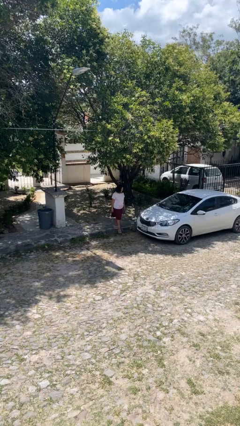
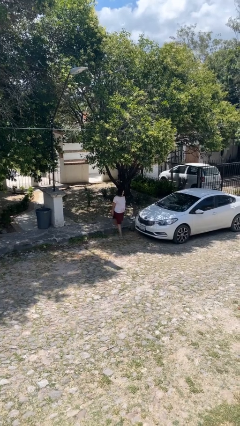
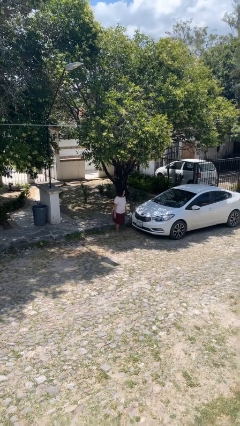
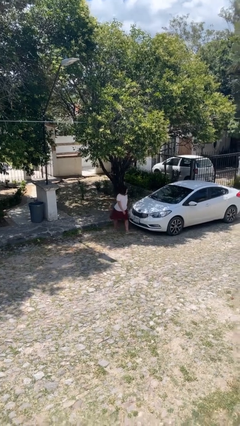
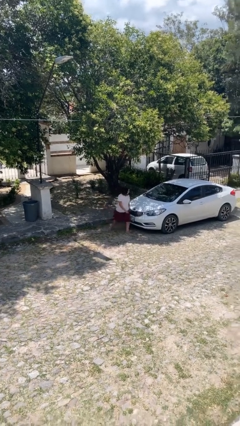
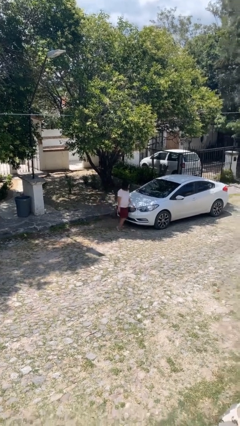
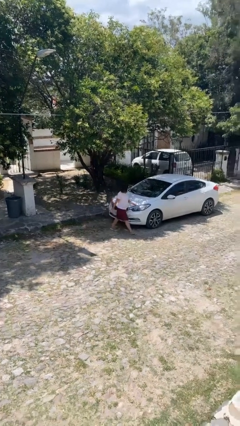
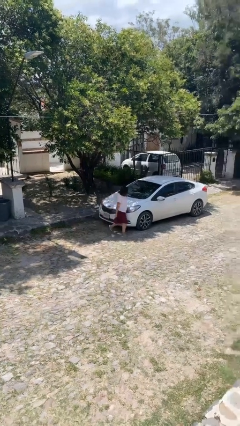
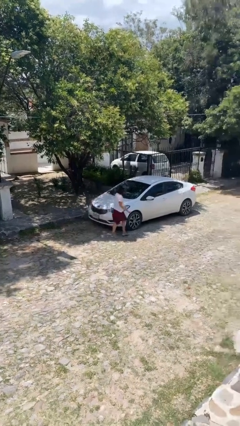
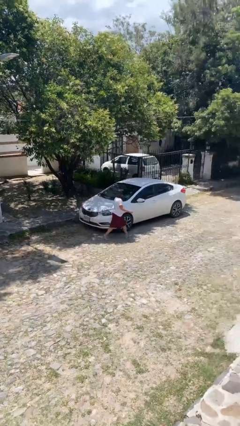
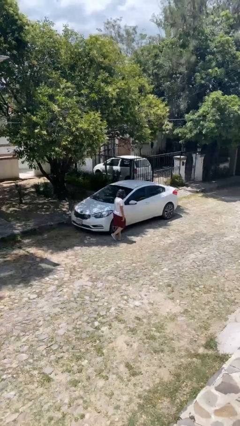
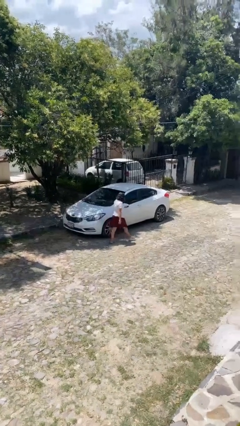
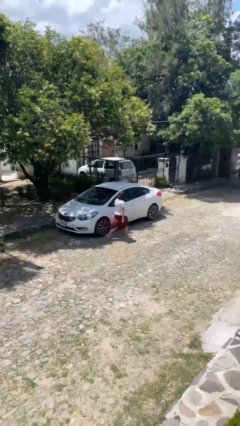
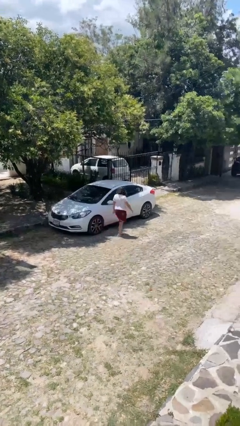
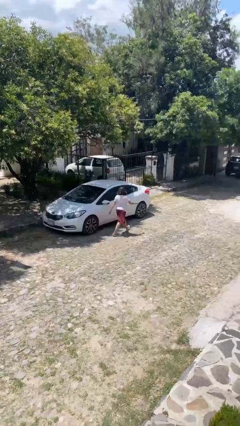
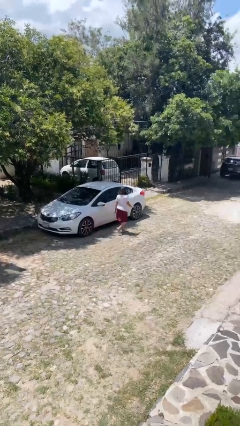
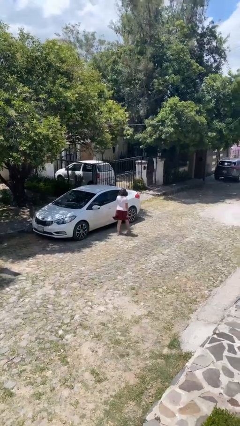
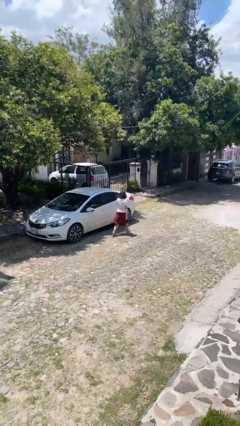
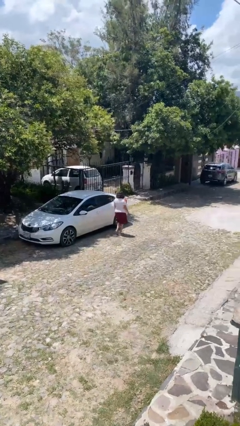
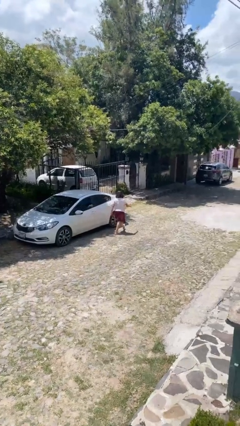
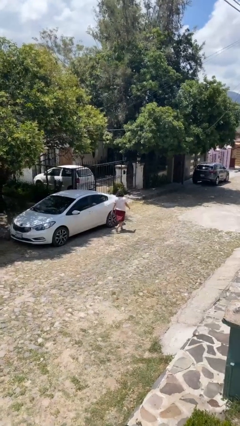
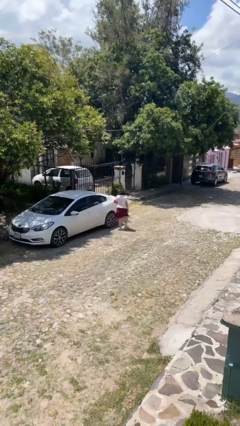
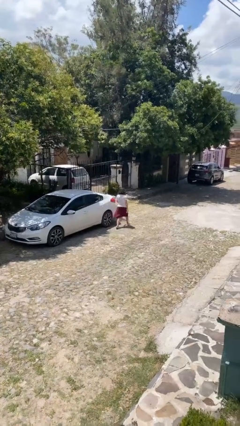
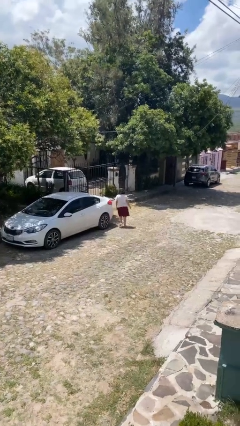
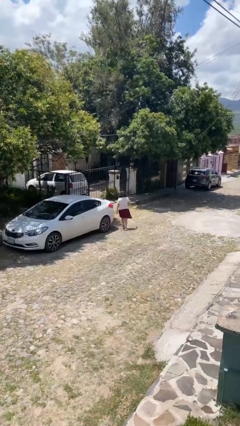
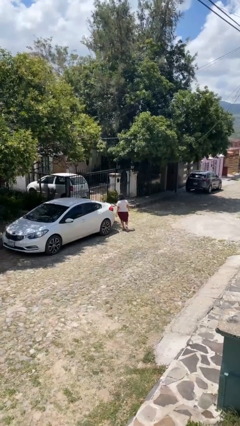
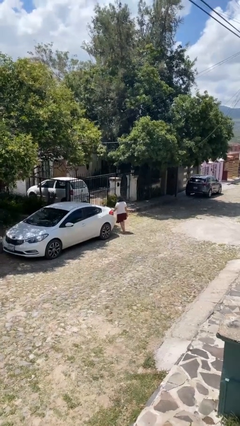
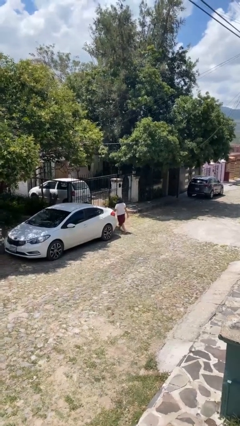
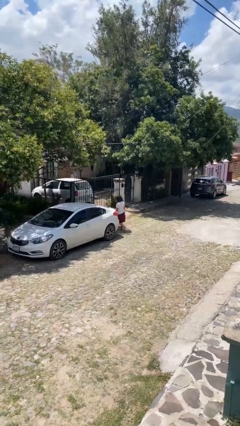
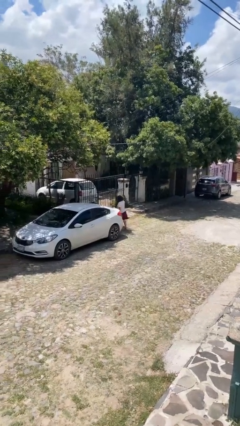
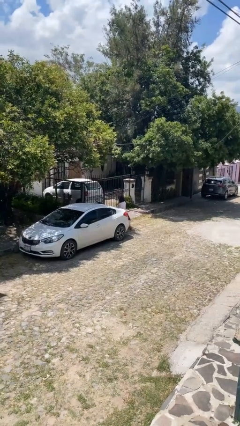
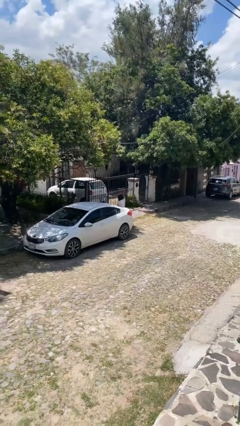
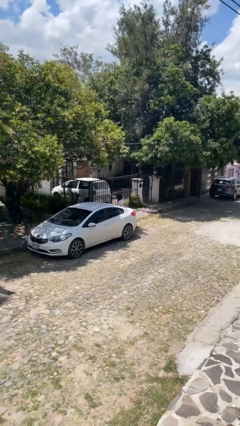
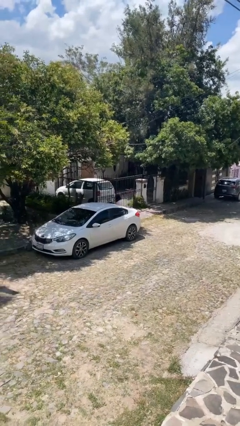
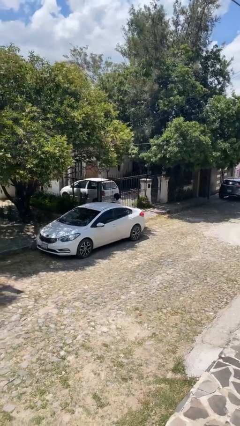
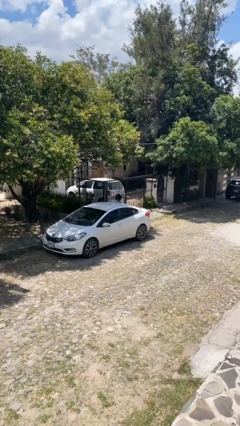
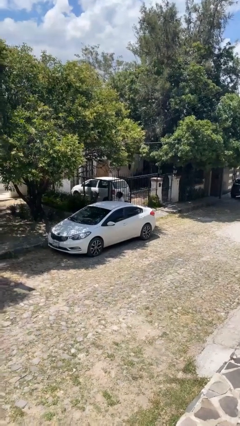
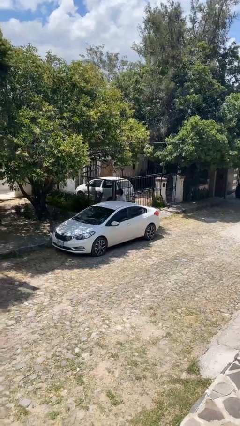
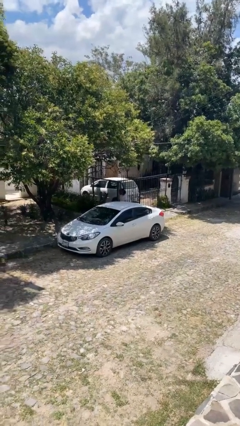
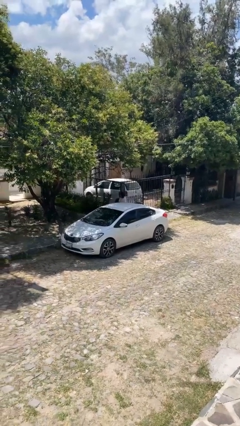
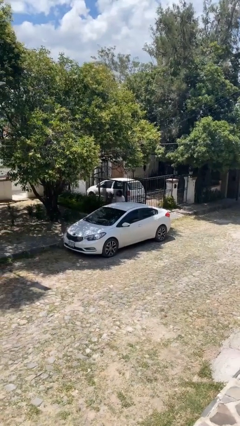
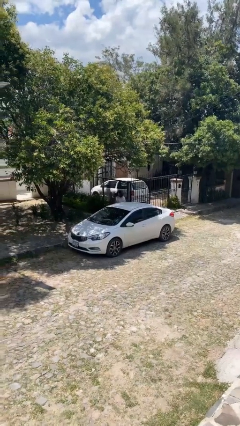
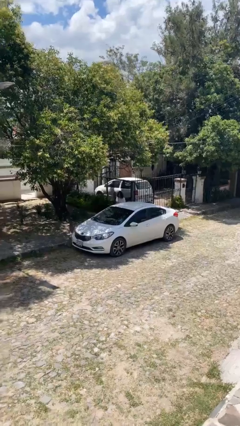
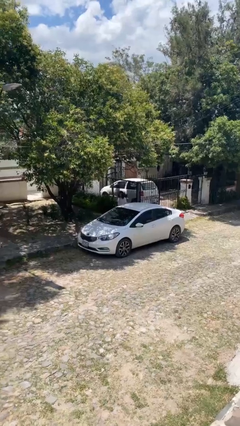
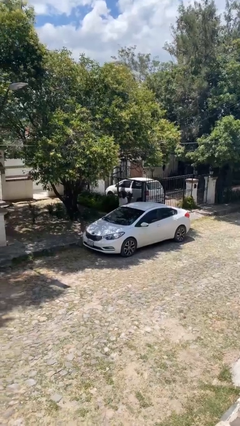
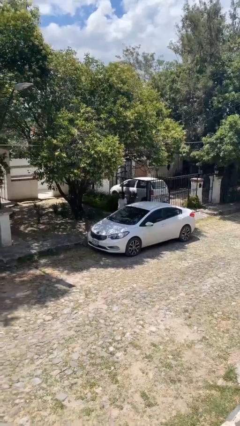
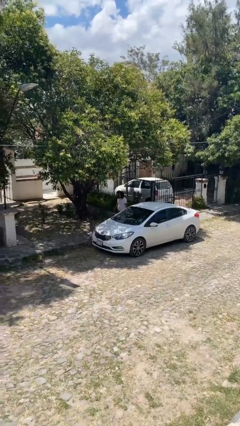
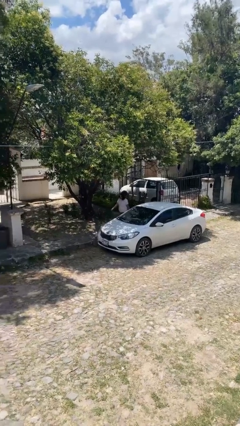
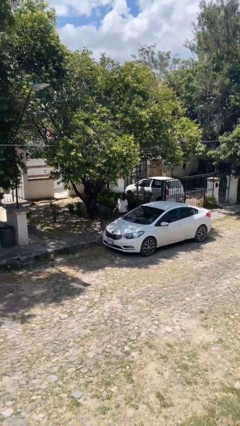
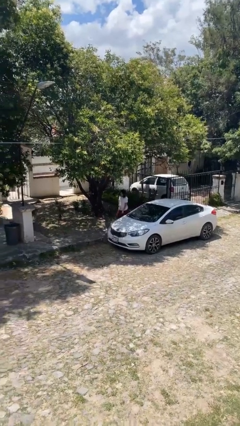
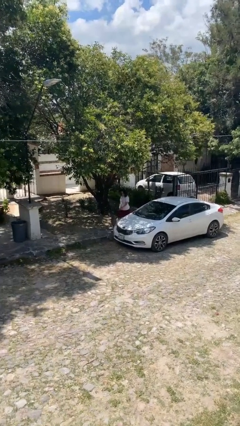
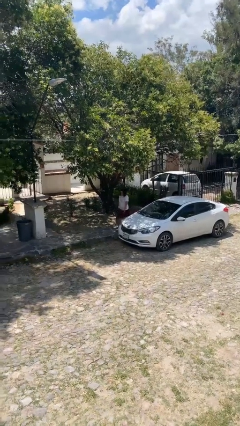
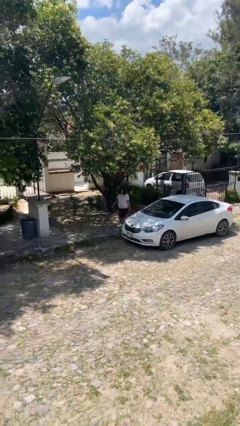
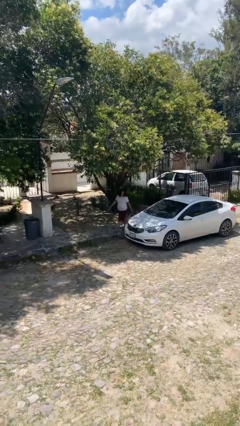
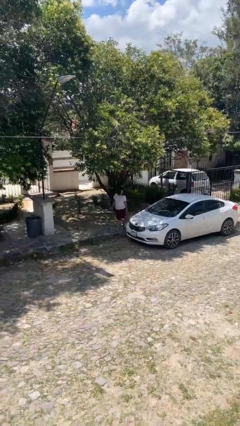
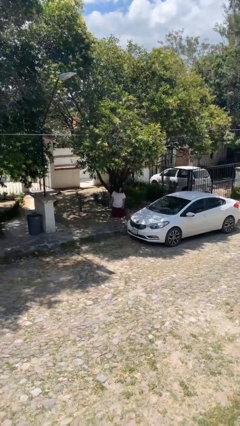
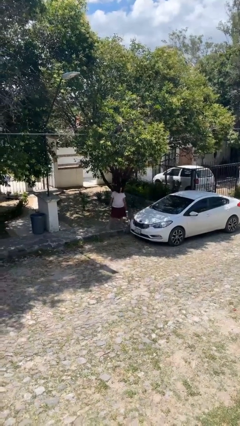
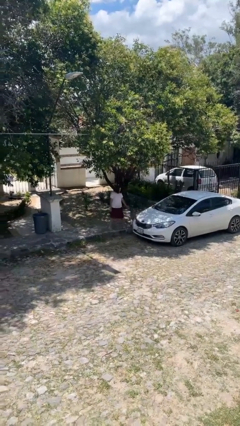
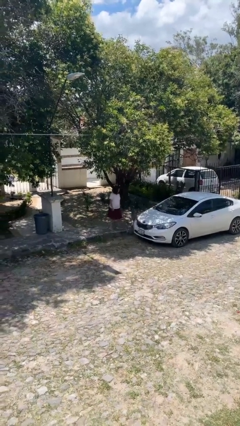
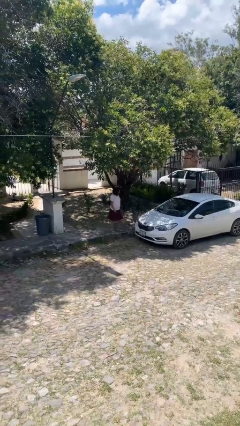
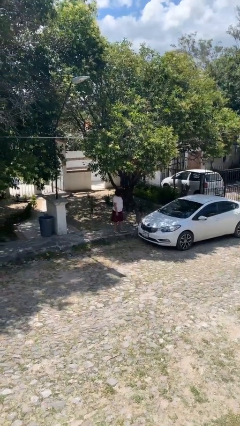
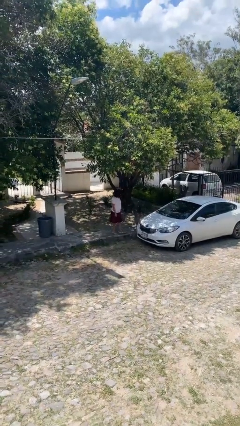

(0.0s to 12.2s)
person walks around car

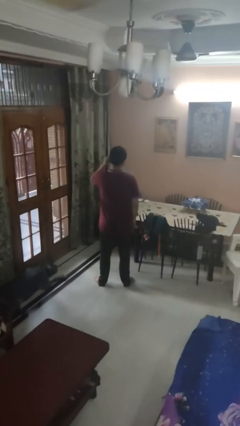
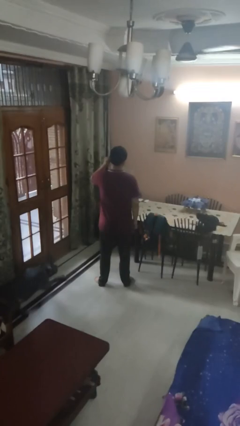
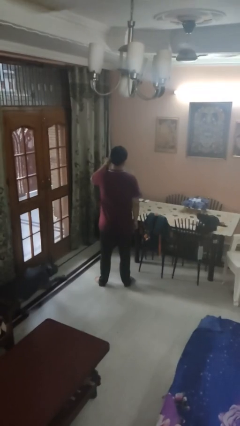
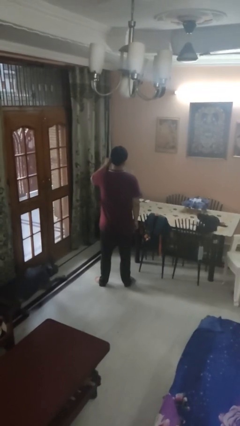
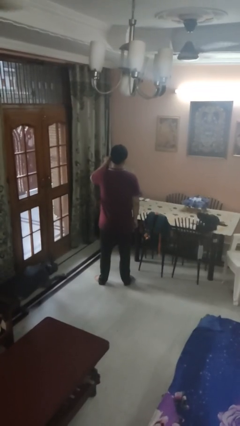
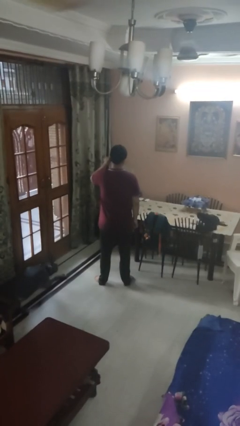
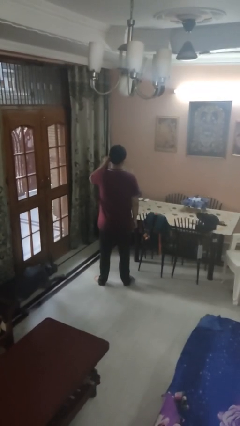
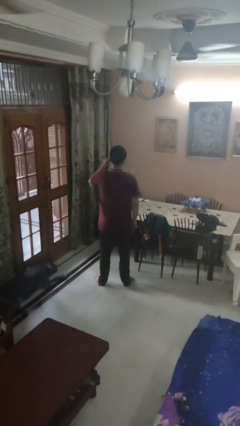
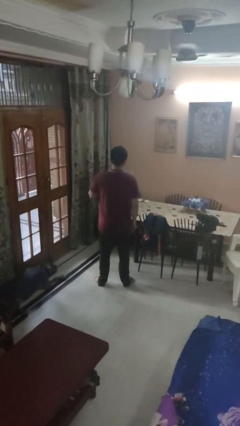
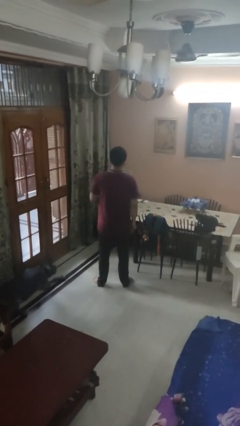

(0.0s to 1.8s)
person touches earlobe

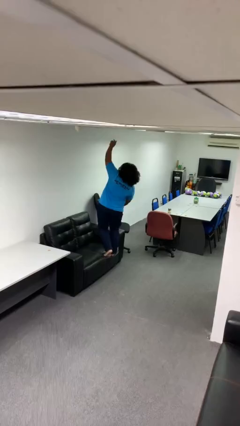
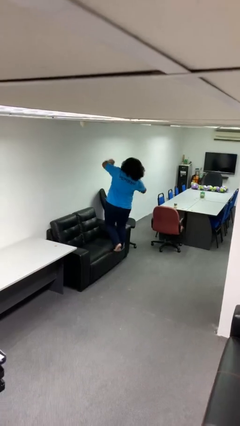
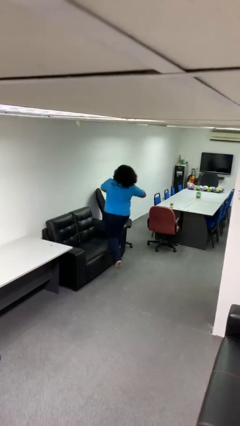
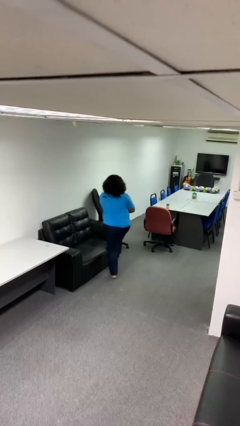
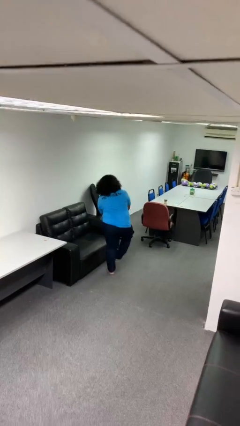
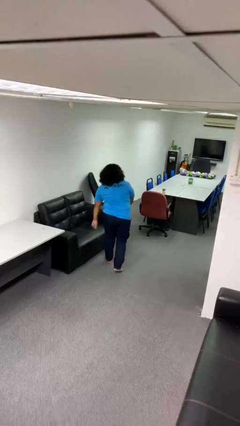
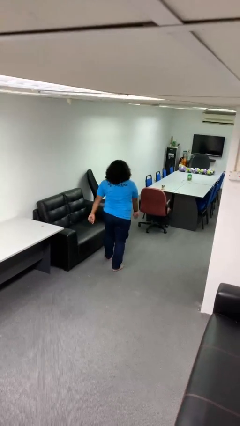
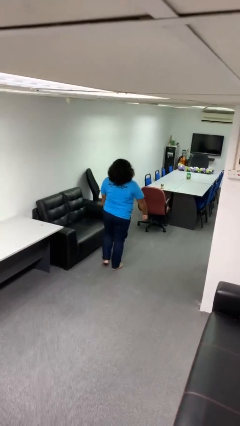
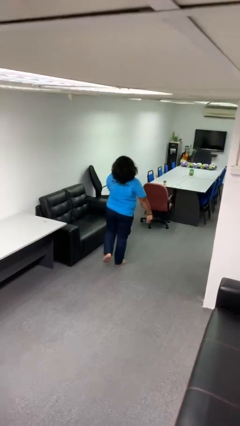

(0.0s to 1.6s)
person climbs off couch

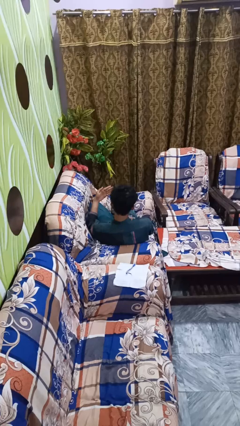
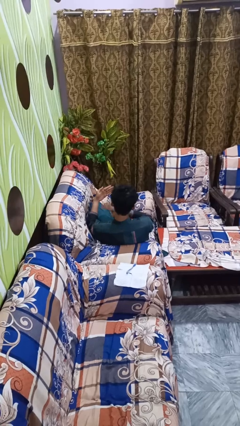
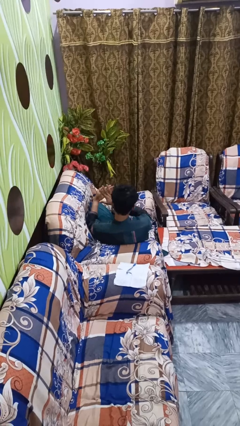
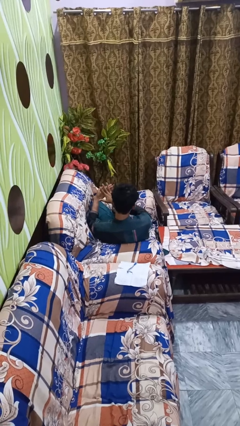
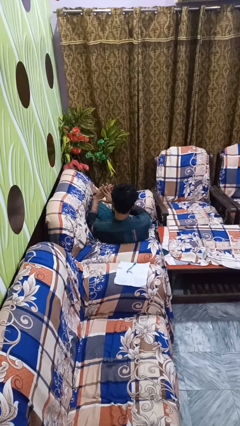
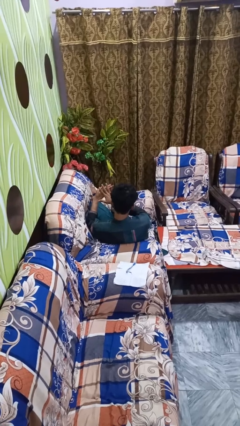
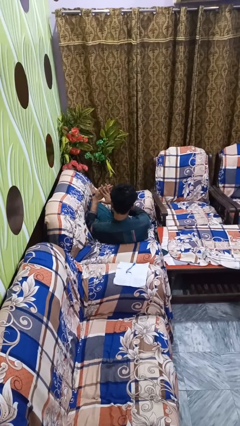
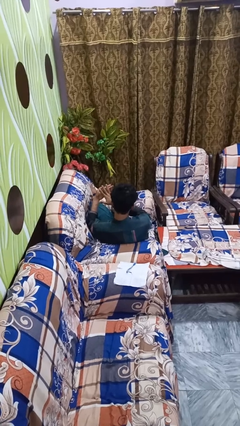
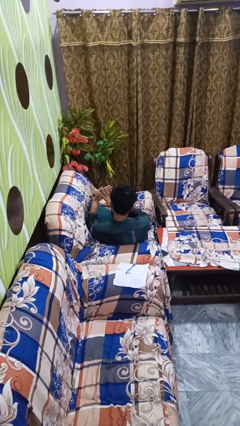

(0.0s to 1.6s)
person gestures number five

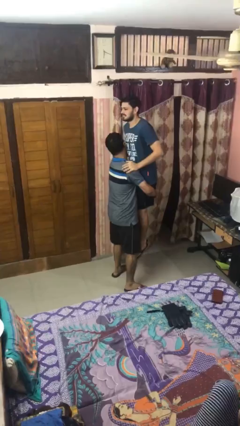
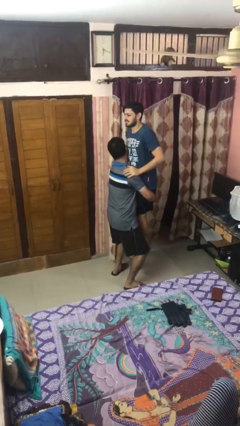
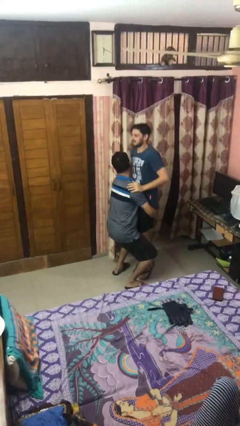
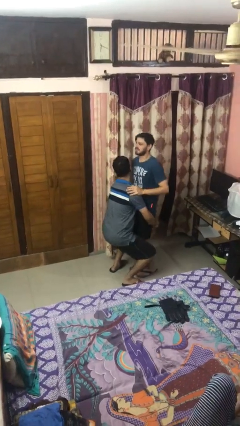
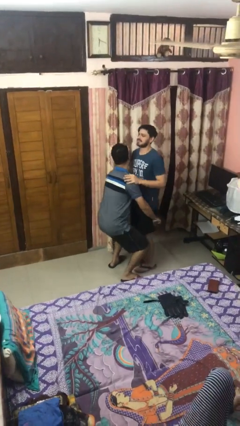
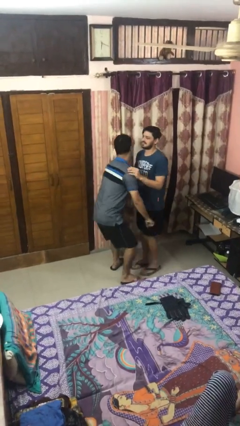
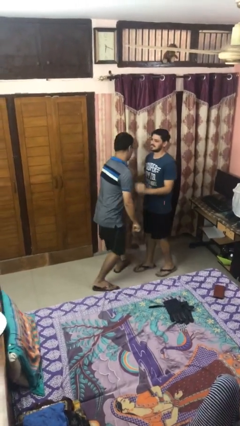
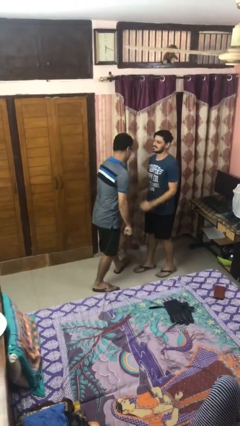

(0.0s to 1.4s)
person puts down person
